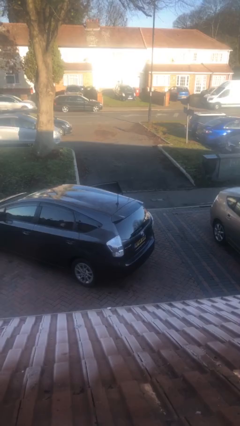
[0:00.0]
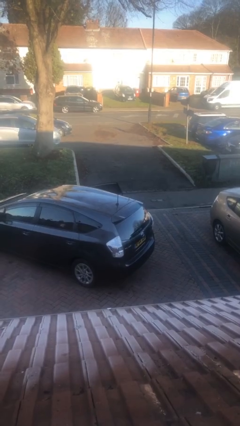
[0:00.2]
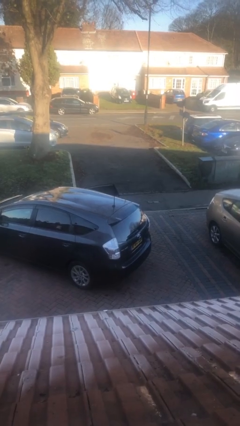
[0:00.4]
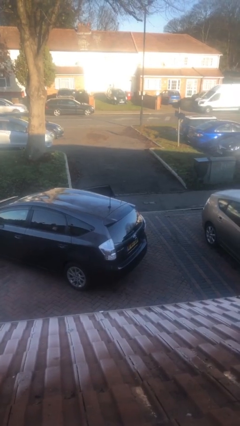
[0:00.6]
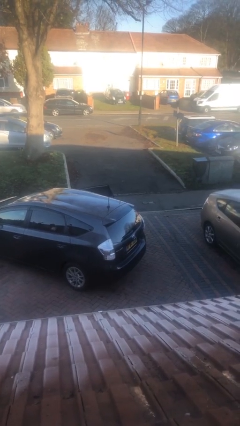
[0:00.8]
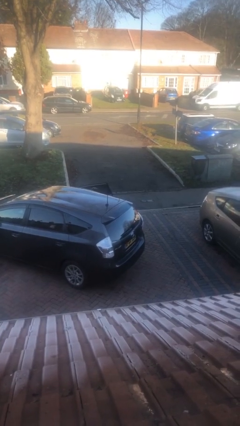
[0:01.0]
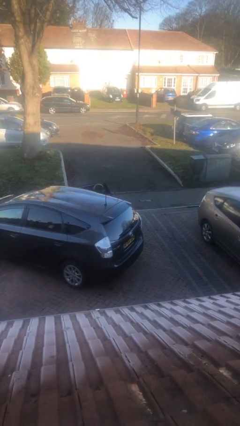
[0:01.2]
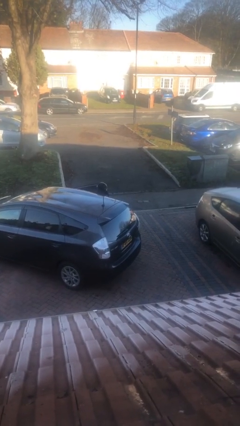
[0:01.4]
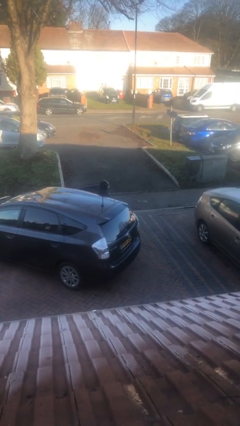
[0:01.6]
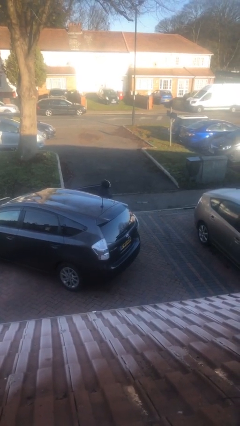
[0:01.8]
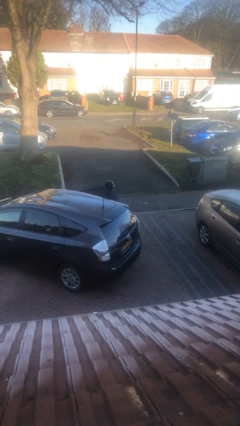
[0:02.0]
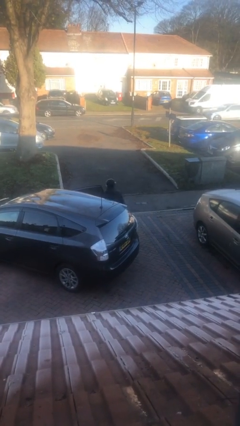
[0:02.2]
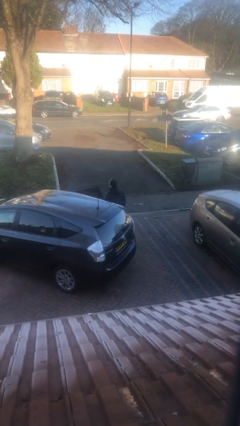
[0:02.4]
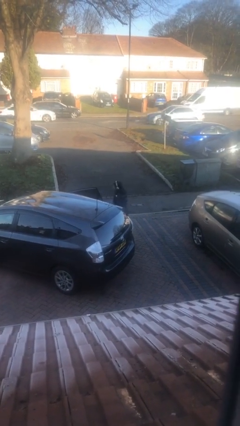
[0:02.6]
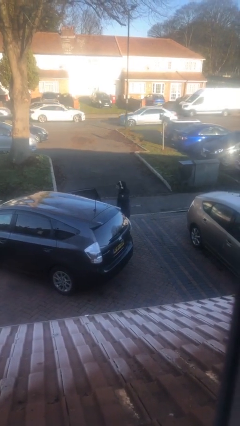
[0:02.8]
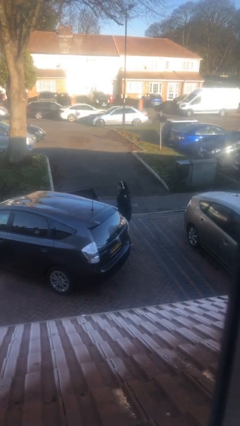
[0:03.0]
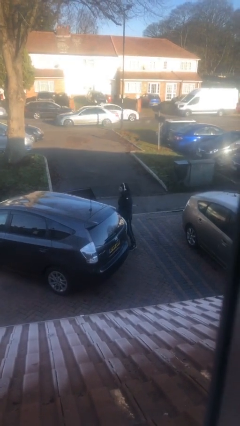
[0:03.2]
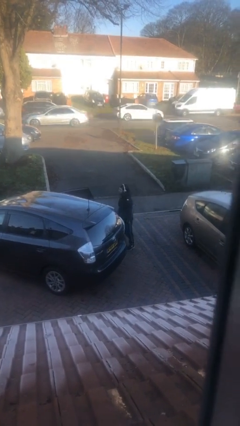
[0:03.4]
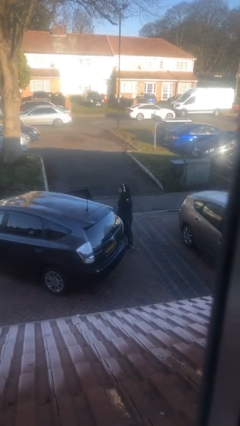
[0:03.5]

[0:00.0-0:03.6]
person exits car

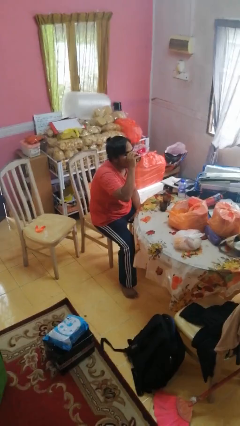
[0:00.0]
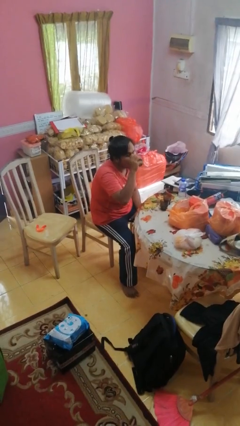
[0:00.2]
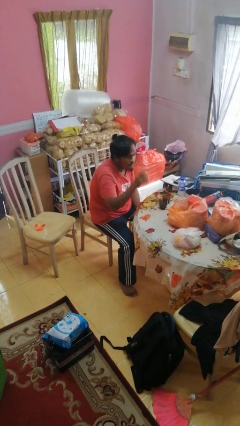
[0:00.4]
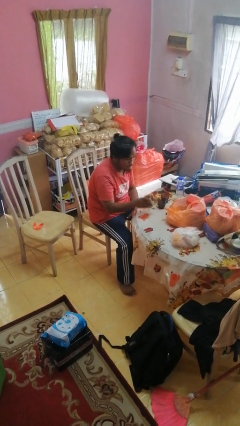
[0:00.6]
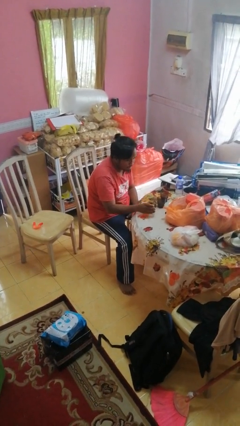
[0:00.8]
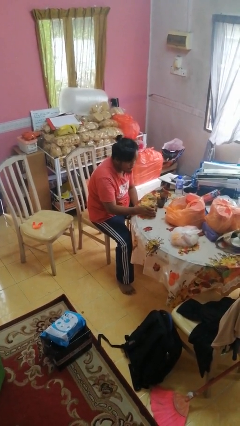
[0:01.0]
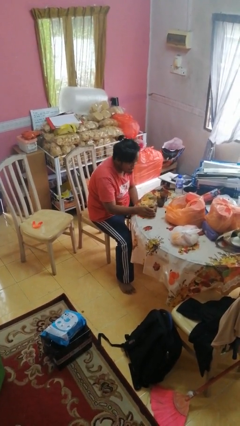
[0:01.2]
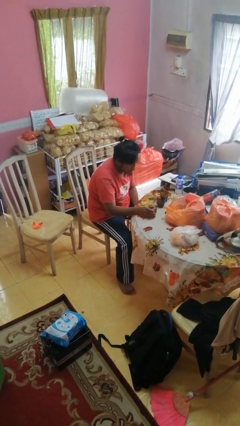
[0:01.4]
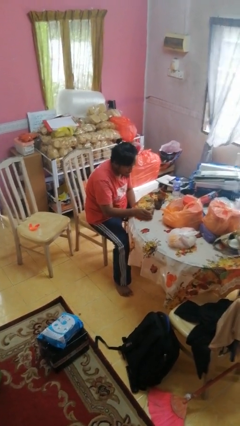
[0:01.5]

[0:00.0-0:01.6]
person puts down object on table

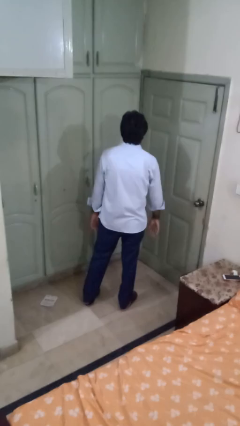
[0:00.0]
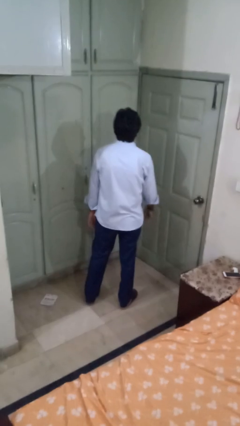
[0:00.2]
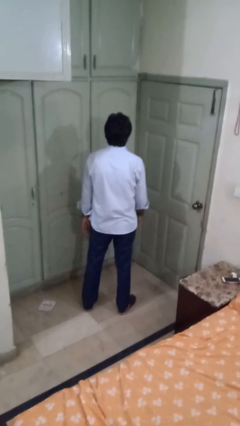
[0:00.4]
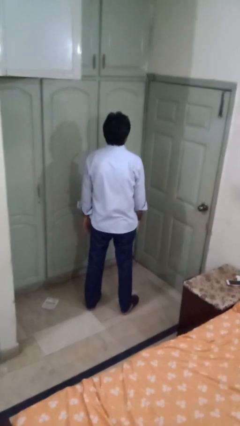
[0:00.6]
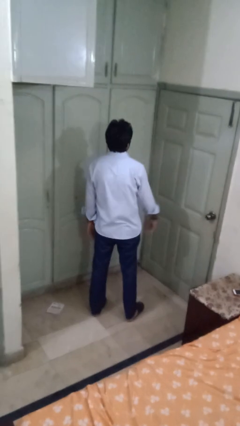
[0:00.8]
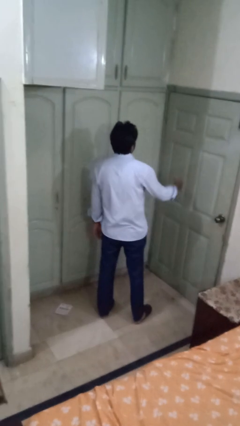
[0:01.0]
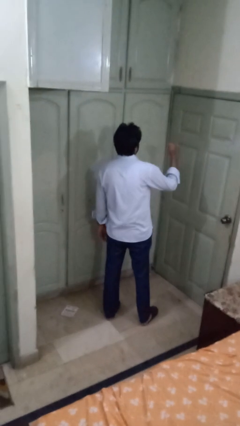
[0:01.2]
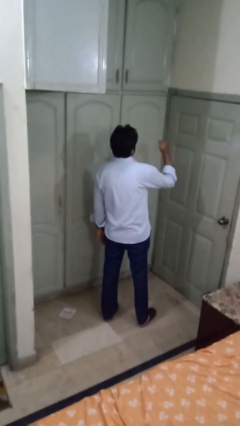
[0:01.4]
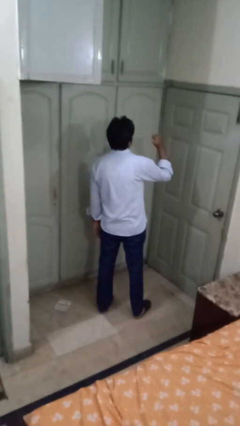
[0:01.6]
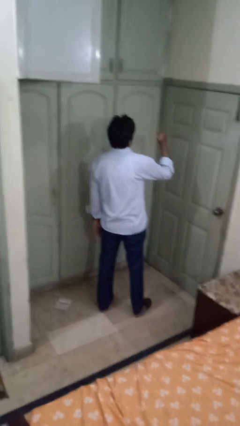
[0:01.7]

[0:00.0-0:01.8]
person gestures behind me

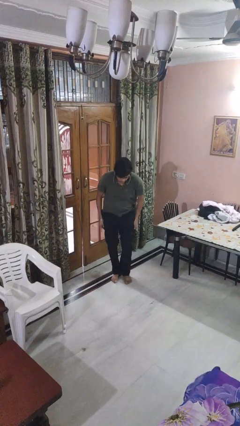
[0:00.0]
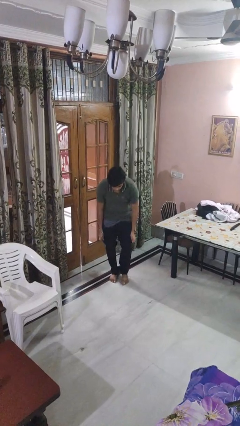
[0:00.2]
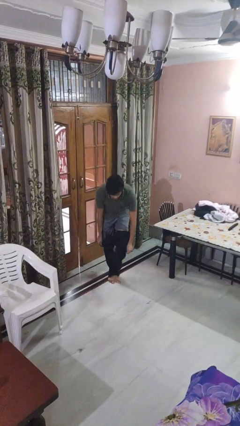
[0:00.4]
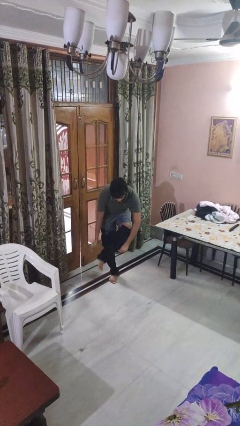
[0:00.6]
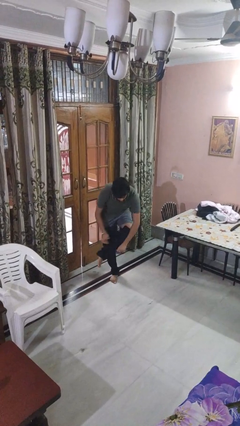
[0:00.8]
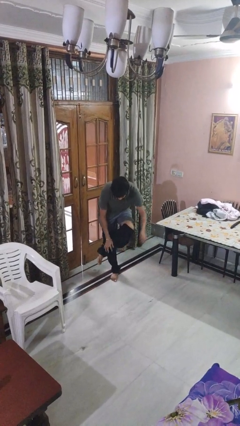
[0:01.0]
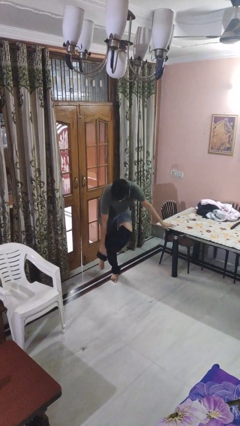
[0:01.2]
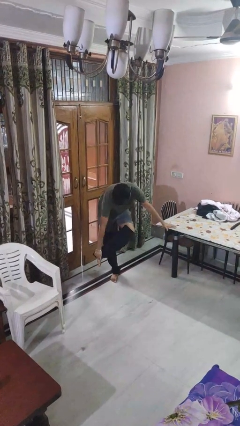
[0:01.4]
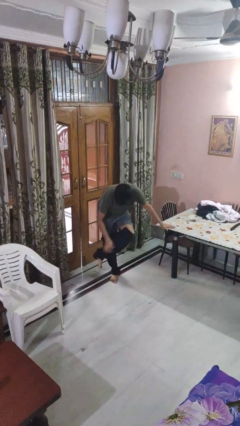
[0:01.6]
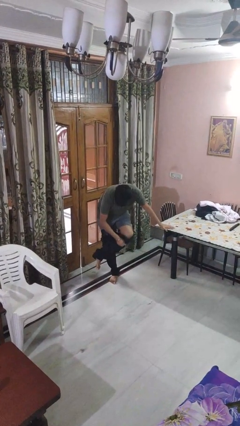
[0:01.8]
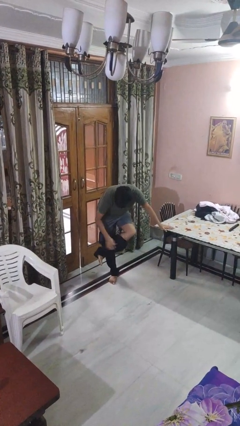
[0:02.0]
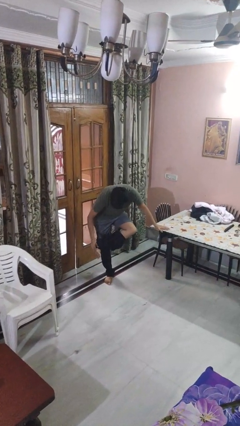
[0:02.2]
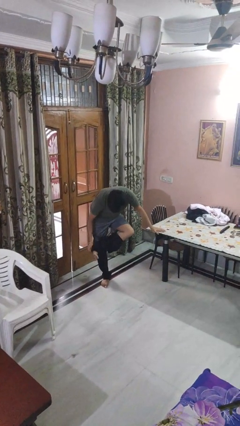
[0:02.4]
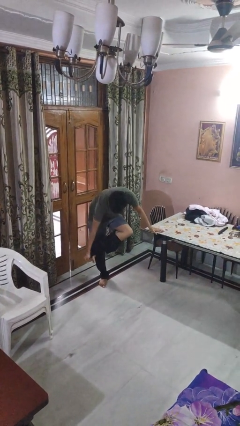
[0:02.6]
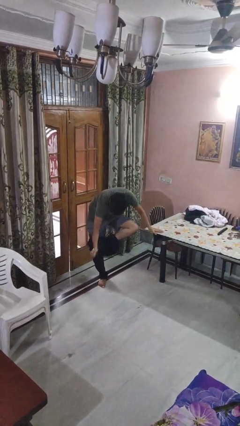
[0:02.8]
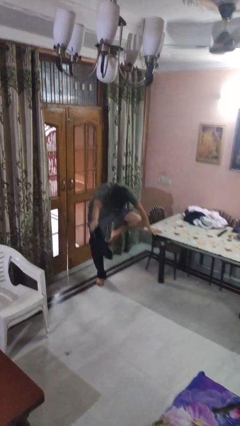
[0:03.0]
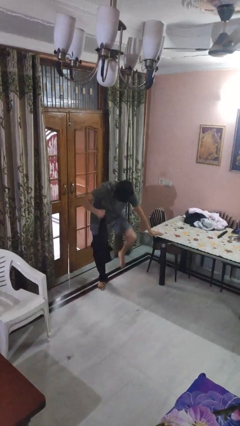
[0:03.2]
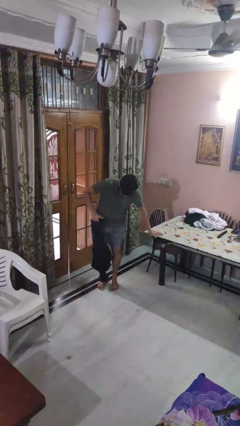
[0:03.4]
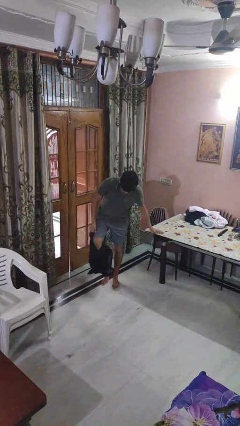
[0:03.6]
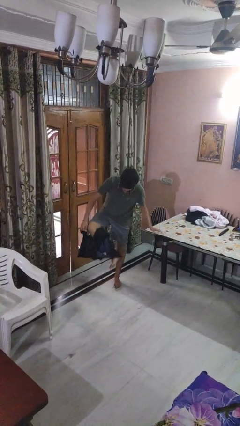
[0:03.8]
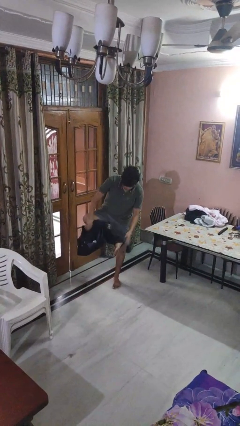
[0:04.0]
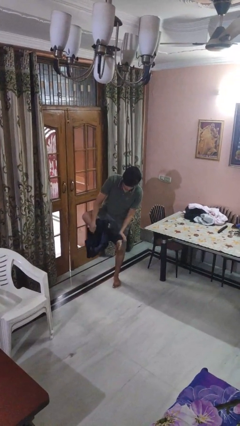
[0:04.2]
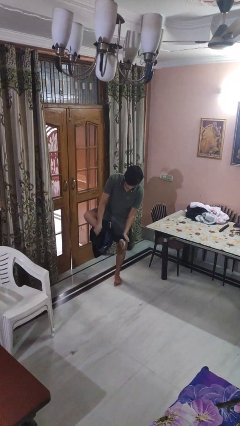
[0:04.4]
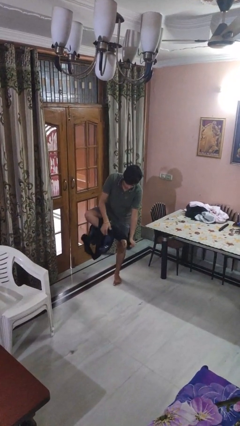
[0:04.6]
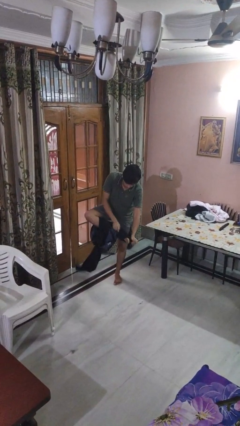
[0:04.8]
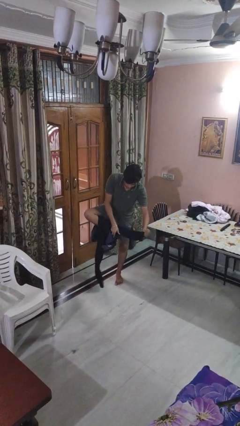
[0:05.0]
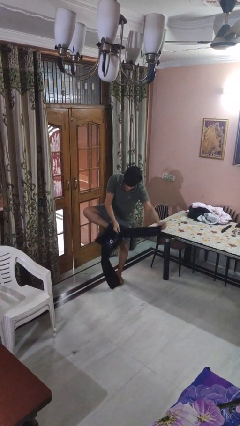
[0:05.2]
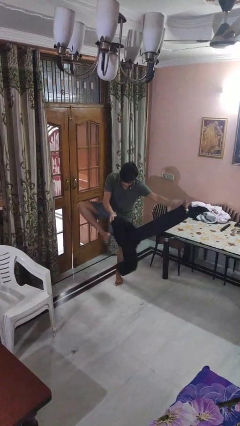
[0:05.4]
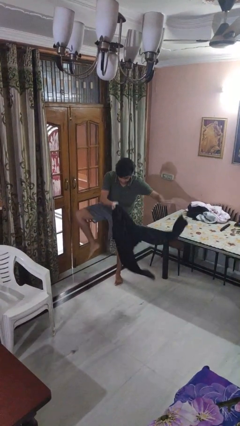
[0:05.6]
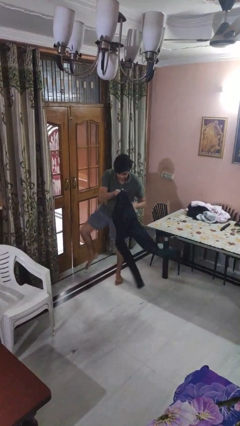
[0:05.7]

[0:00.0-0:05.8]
person takes off pants

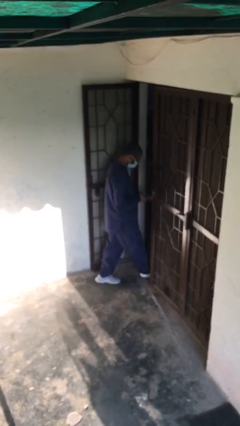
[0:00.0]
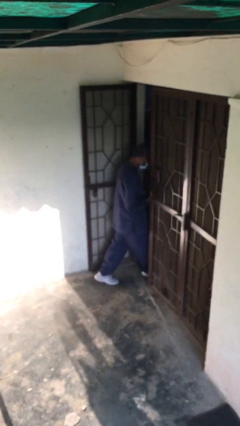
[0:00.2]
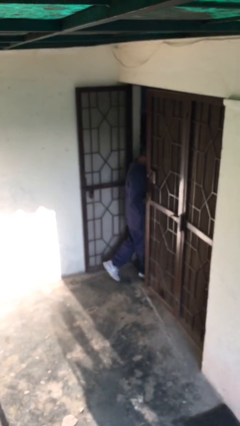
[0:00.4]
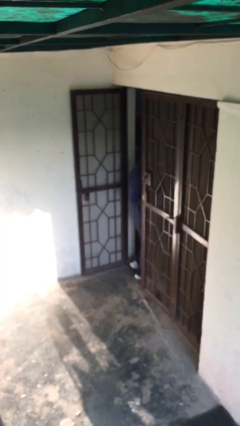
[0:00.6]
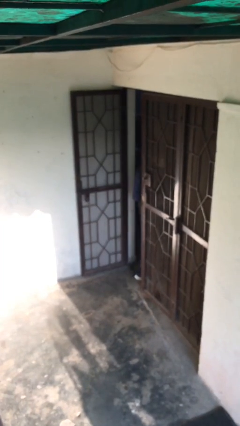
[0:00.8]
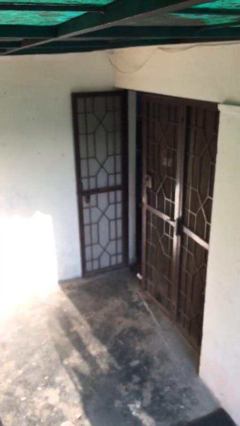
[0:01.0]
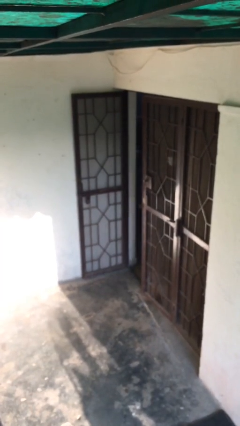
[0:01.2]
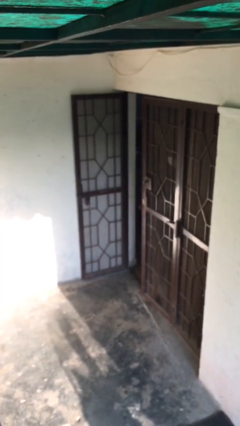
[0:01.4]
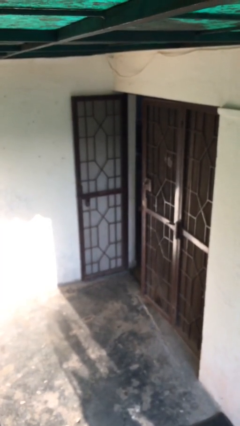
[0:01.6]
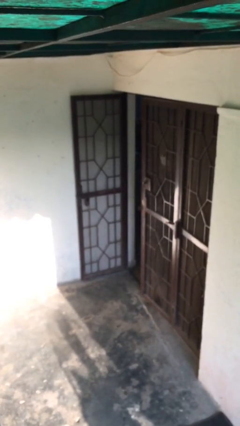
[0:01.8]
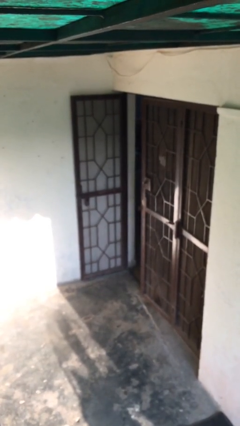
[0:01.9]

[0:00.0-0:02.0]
person exits scene through structure

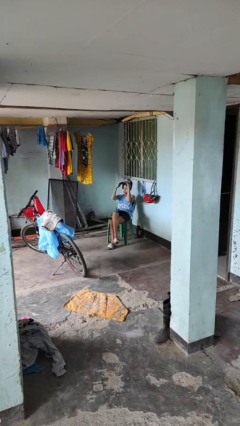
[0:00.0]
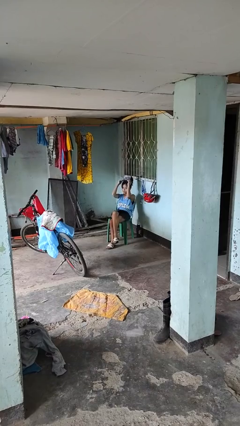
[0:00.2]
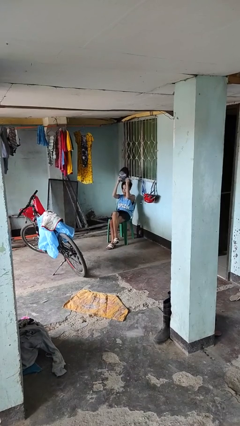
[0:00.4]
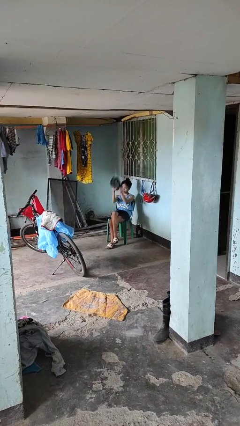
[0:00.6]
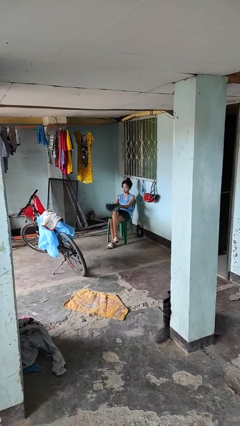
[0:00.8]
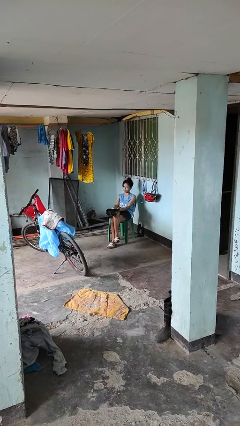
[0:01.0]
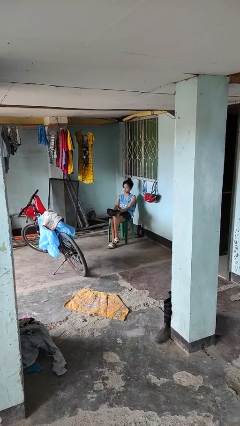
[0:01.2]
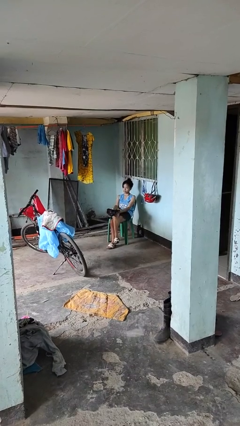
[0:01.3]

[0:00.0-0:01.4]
person takes off hat

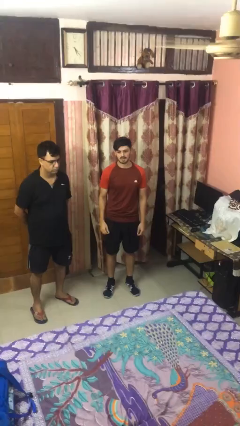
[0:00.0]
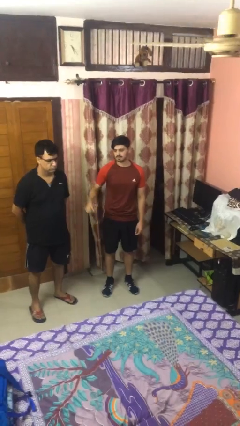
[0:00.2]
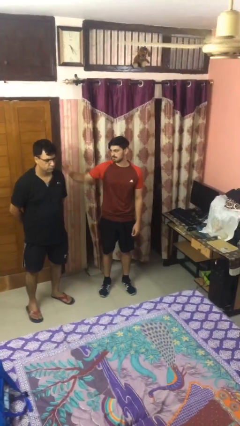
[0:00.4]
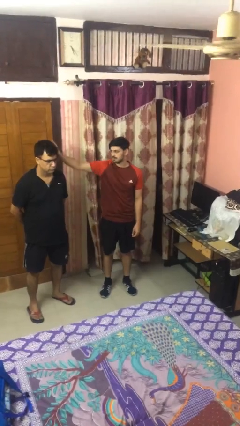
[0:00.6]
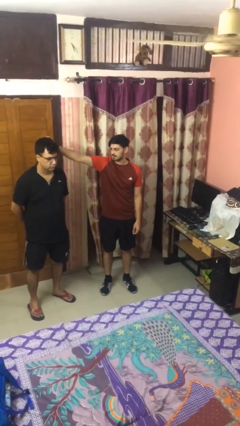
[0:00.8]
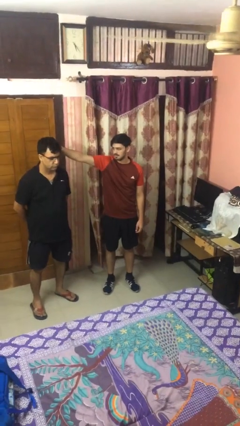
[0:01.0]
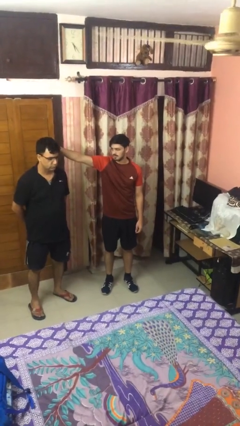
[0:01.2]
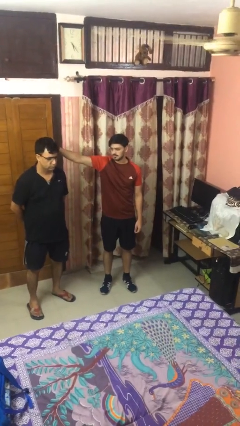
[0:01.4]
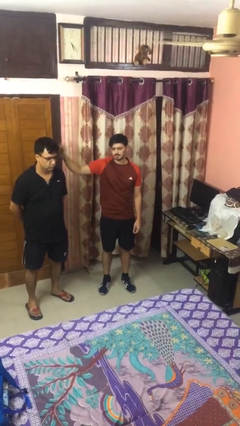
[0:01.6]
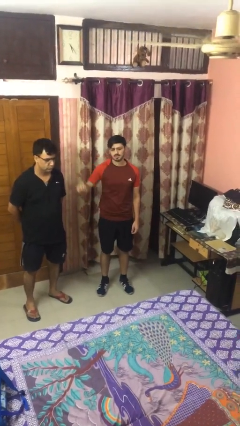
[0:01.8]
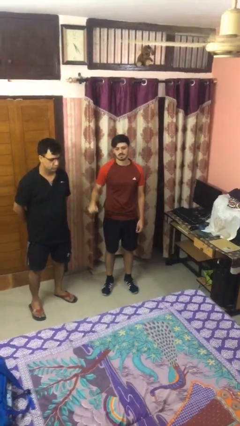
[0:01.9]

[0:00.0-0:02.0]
person grabs person by hair
